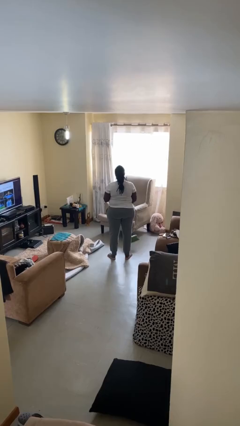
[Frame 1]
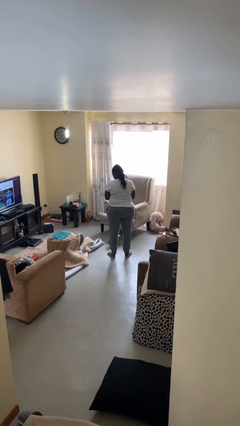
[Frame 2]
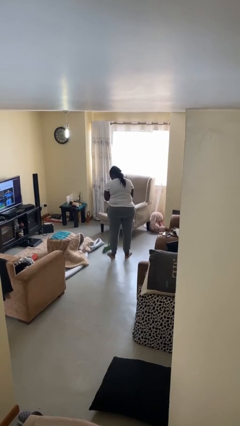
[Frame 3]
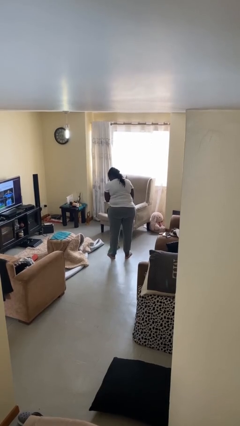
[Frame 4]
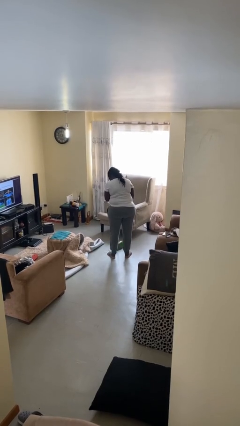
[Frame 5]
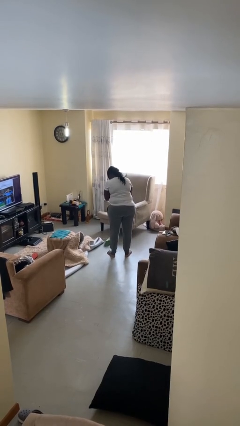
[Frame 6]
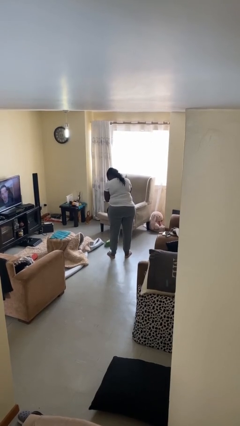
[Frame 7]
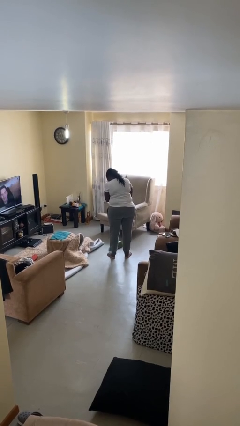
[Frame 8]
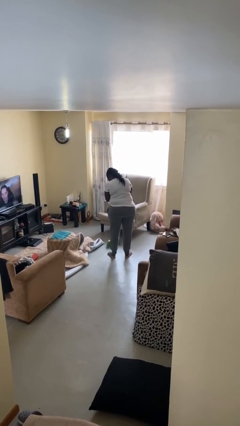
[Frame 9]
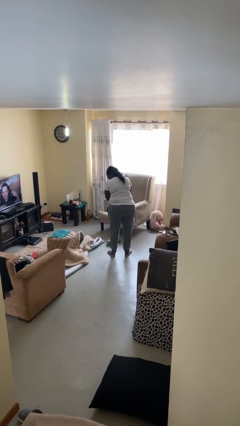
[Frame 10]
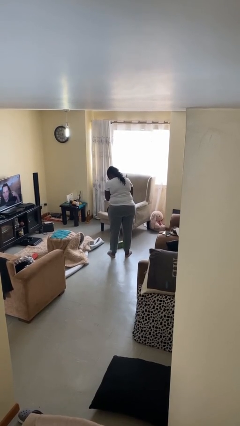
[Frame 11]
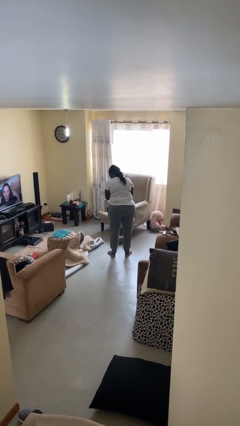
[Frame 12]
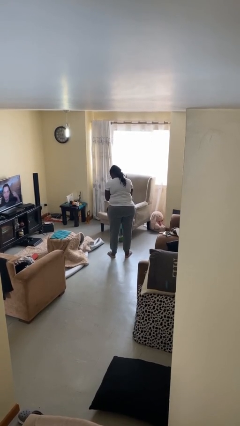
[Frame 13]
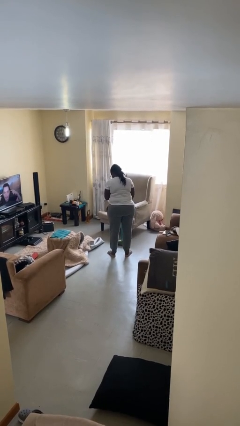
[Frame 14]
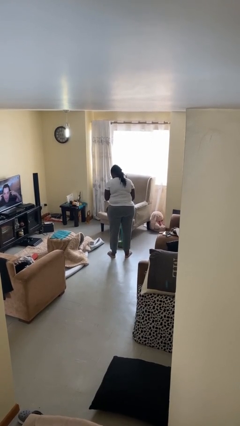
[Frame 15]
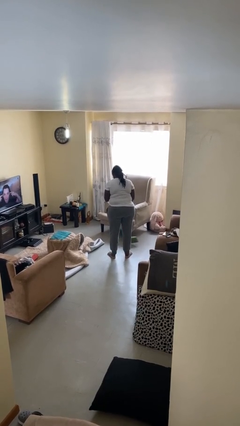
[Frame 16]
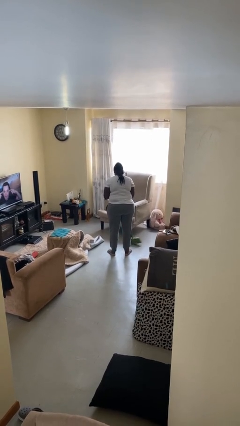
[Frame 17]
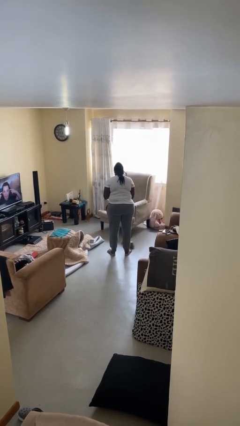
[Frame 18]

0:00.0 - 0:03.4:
person sweeps floor

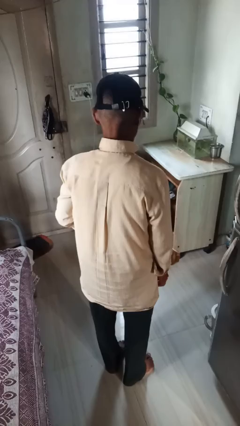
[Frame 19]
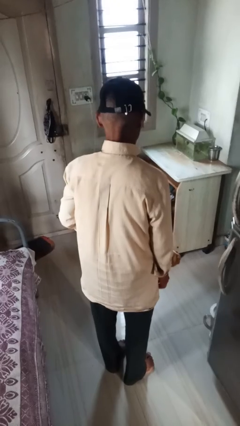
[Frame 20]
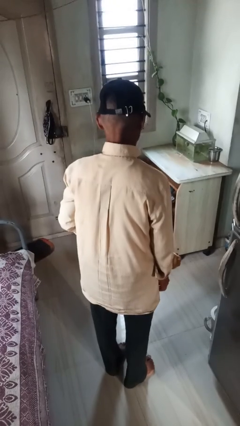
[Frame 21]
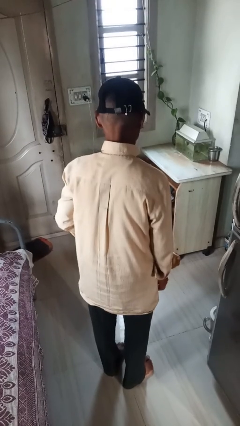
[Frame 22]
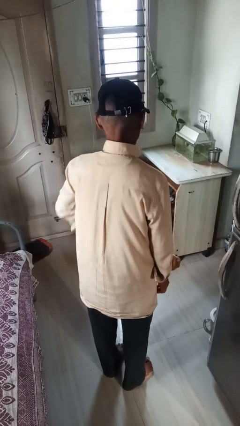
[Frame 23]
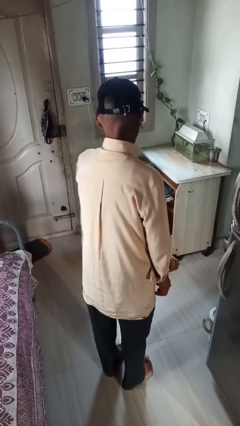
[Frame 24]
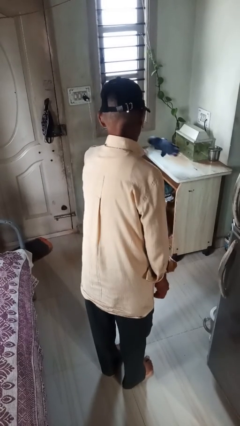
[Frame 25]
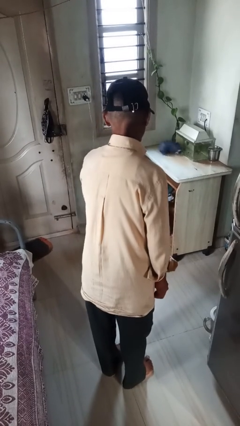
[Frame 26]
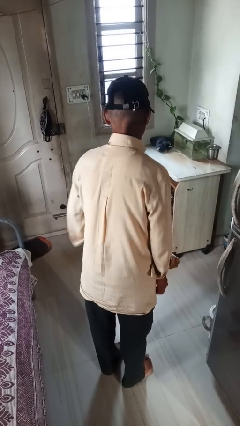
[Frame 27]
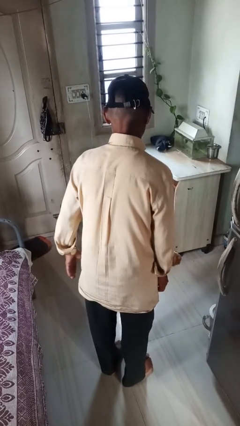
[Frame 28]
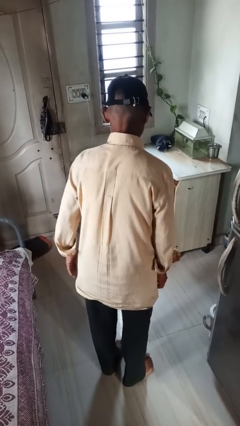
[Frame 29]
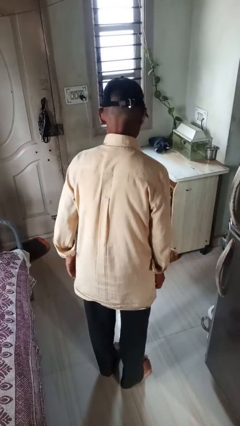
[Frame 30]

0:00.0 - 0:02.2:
person throws object on table

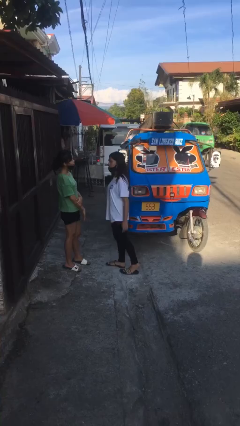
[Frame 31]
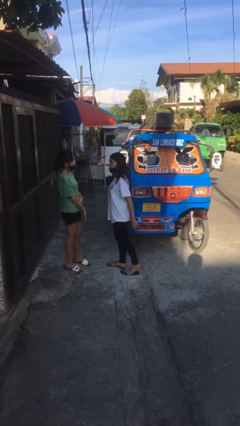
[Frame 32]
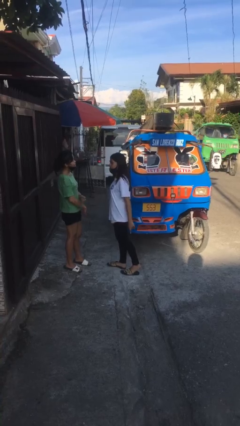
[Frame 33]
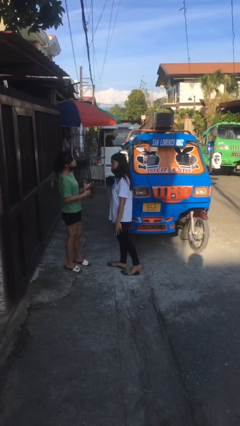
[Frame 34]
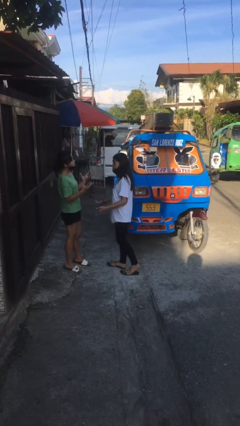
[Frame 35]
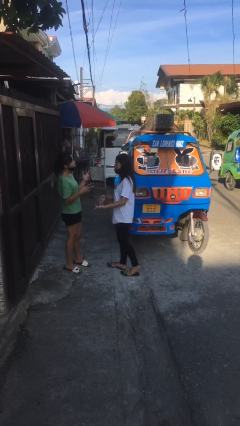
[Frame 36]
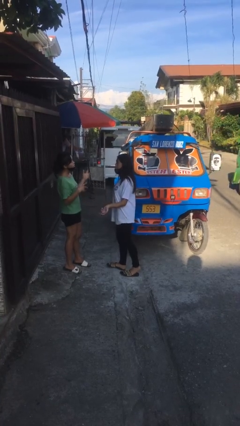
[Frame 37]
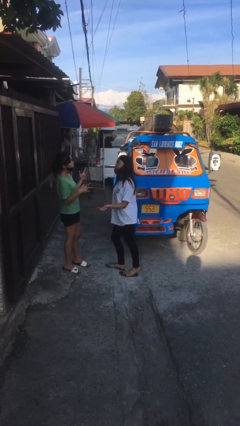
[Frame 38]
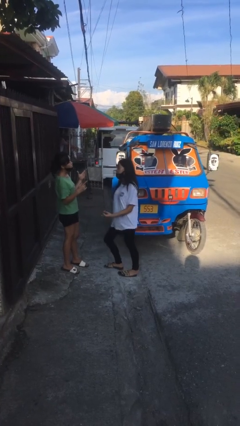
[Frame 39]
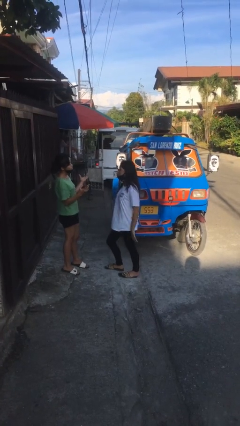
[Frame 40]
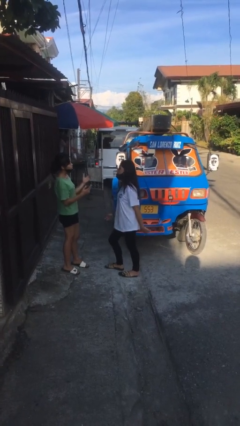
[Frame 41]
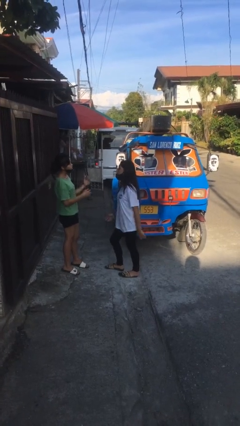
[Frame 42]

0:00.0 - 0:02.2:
person talks to person

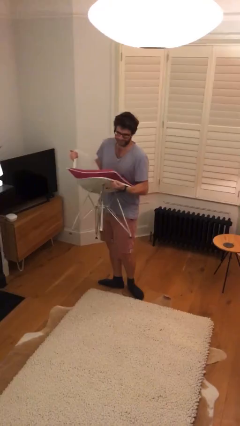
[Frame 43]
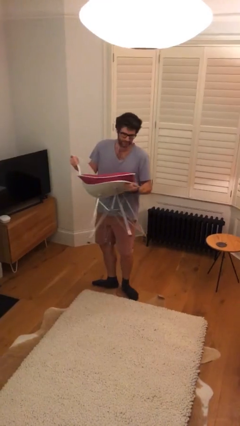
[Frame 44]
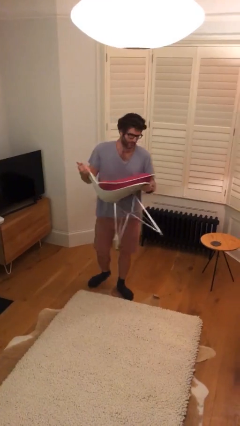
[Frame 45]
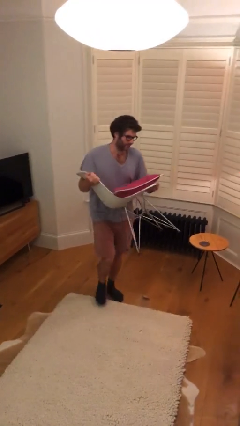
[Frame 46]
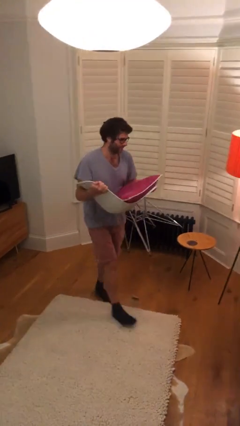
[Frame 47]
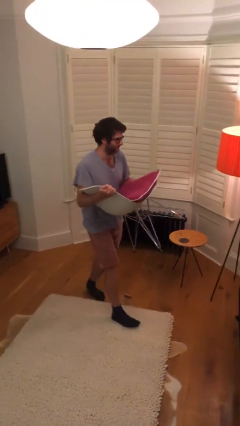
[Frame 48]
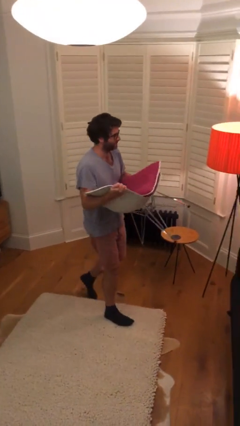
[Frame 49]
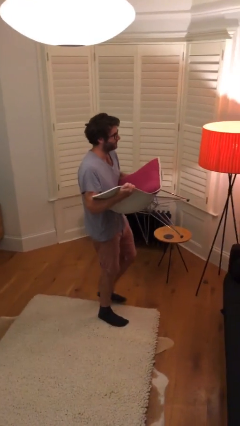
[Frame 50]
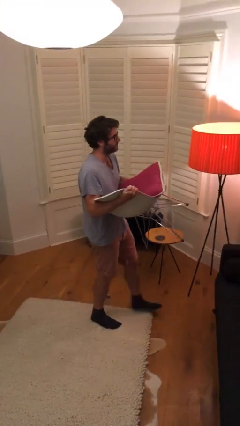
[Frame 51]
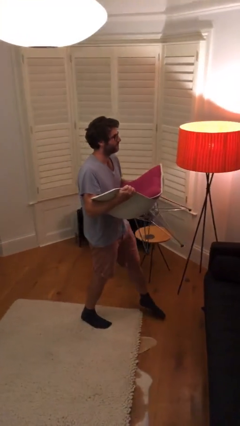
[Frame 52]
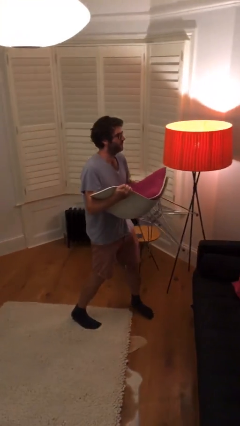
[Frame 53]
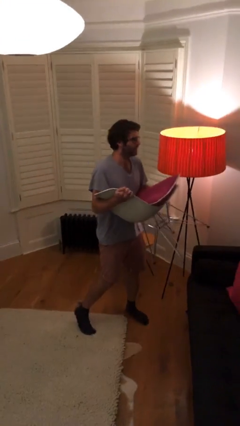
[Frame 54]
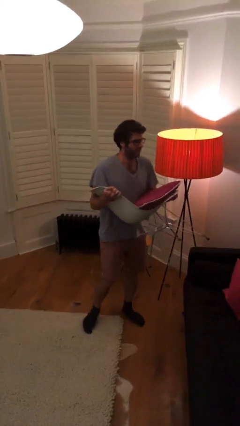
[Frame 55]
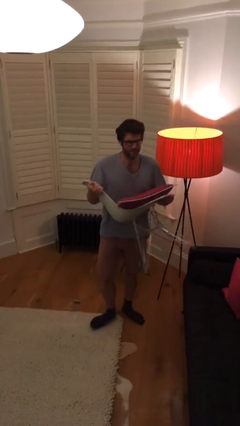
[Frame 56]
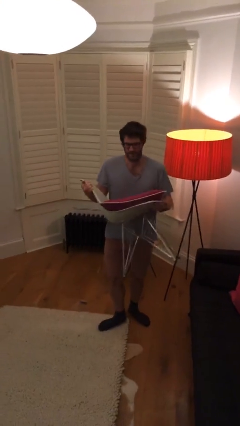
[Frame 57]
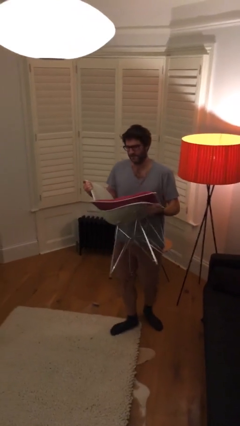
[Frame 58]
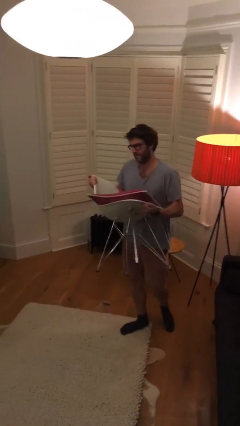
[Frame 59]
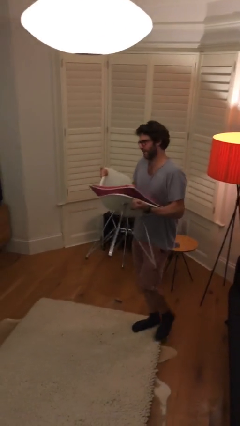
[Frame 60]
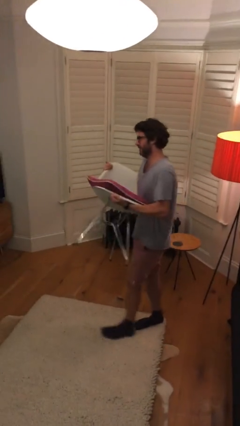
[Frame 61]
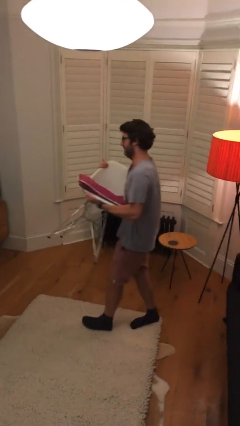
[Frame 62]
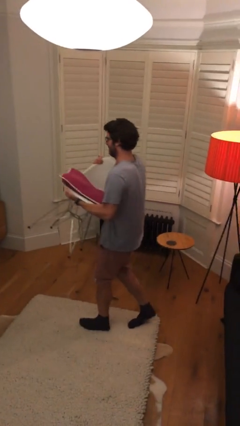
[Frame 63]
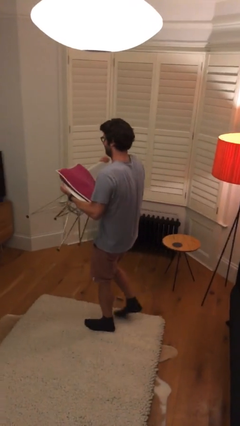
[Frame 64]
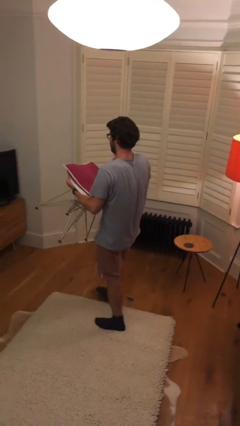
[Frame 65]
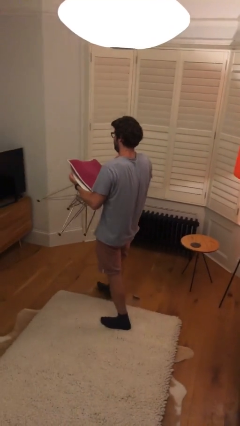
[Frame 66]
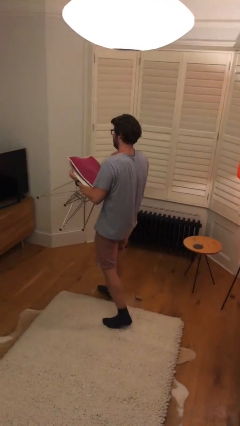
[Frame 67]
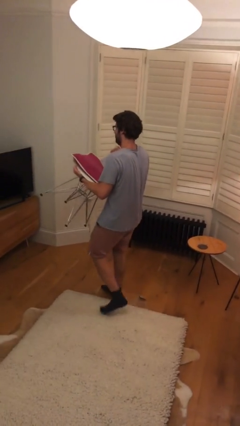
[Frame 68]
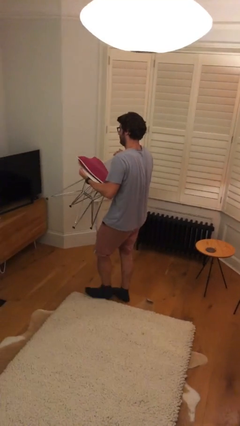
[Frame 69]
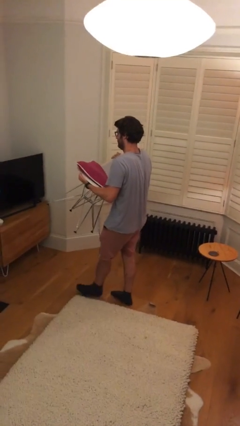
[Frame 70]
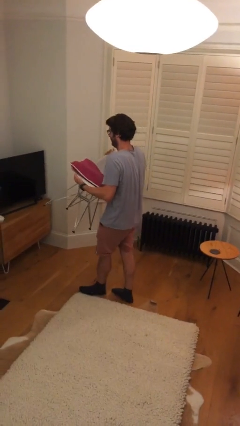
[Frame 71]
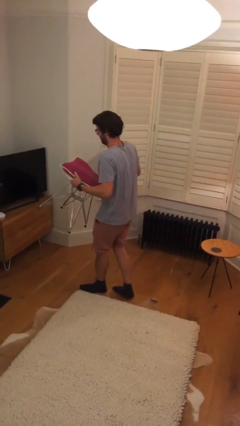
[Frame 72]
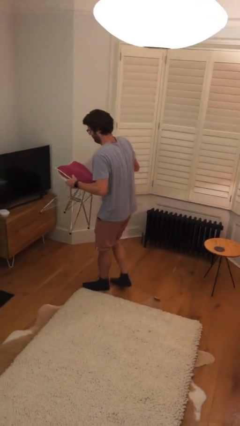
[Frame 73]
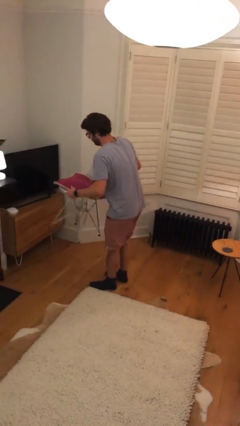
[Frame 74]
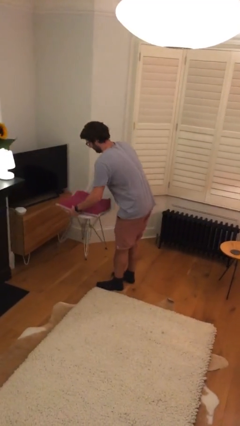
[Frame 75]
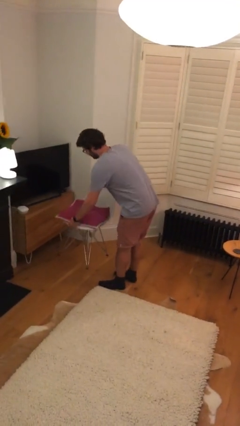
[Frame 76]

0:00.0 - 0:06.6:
person carries heavy object

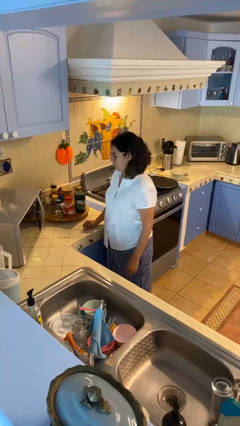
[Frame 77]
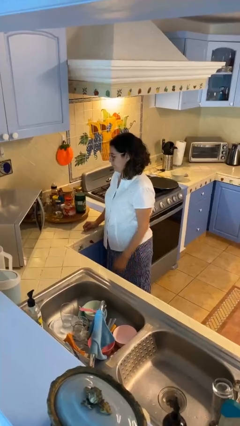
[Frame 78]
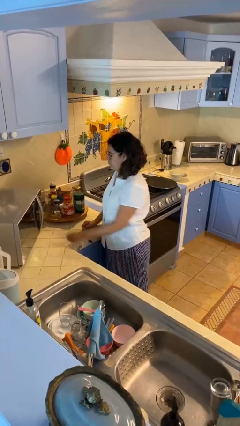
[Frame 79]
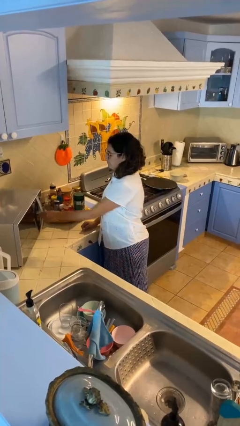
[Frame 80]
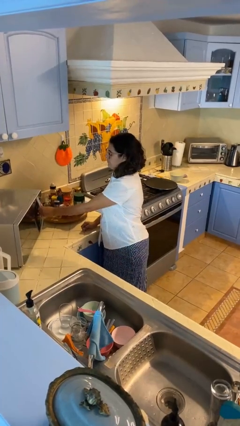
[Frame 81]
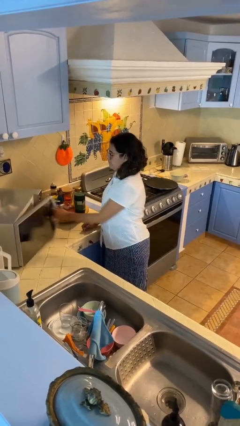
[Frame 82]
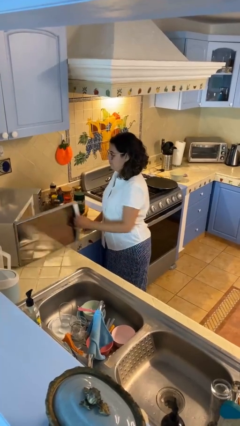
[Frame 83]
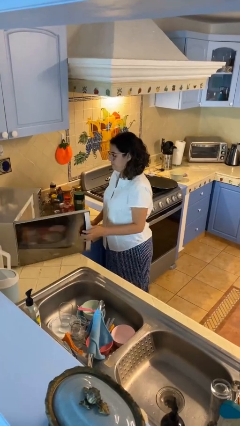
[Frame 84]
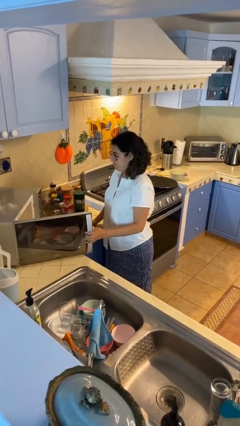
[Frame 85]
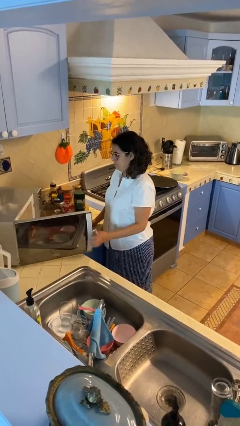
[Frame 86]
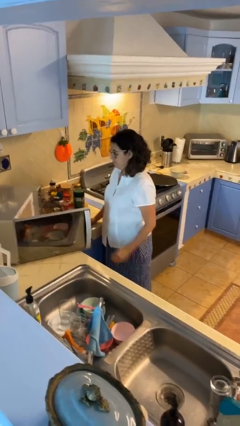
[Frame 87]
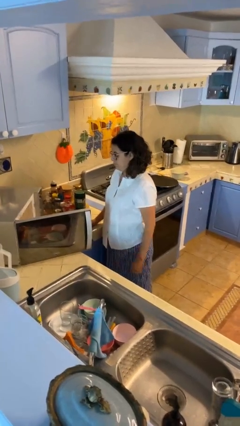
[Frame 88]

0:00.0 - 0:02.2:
person opens microwave

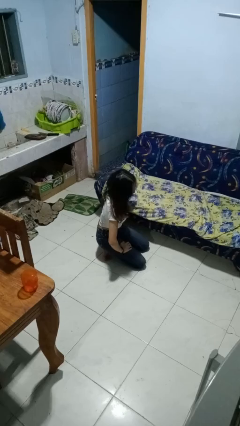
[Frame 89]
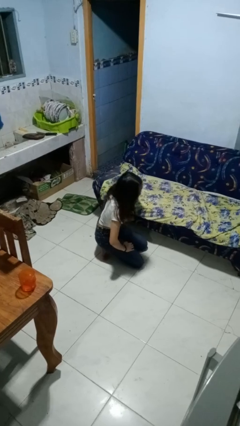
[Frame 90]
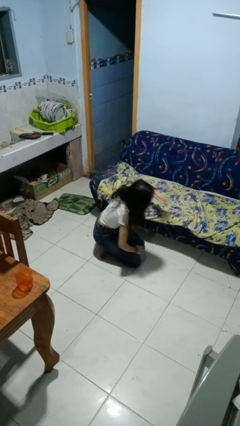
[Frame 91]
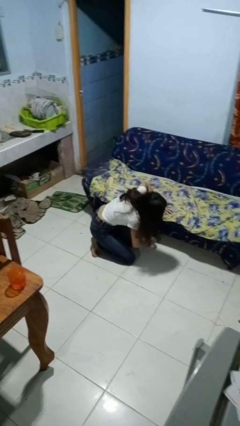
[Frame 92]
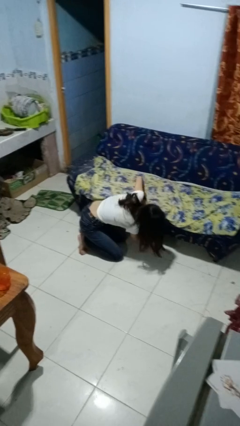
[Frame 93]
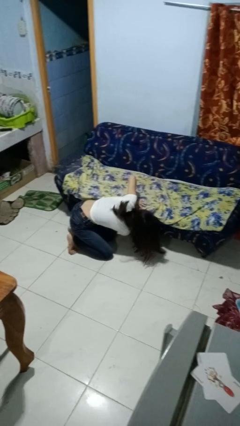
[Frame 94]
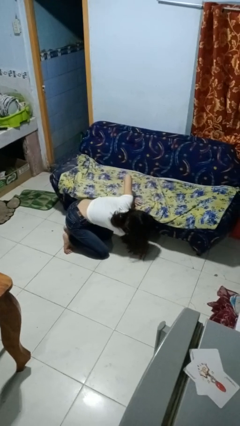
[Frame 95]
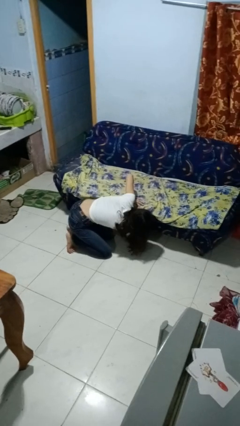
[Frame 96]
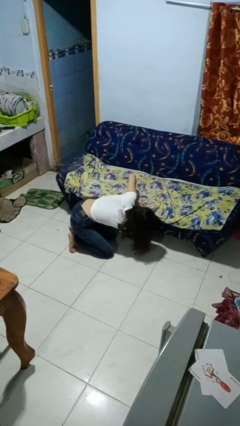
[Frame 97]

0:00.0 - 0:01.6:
person searches under couch
